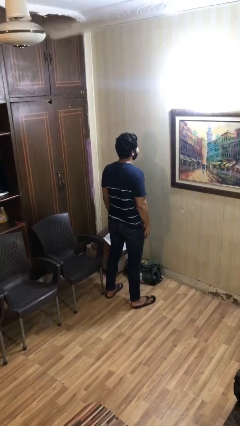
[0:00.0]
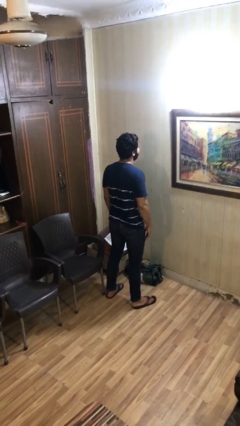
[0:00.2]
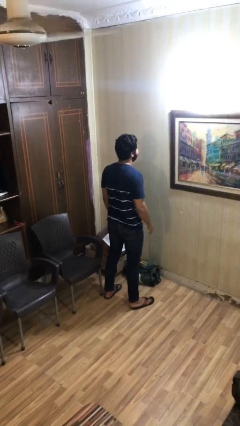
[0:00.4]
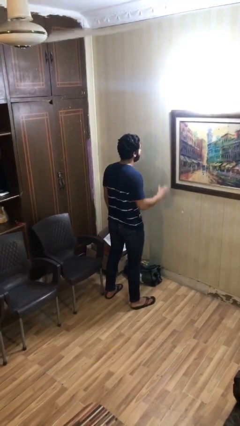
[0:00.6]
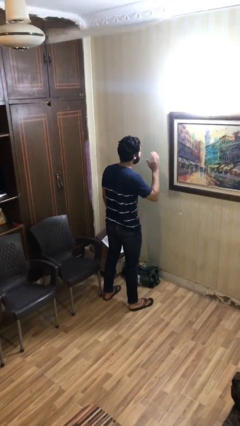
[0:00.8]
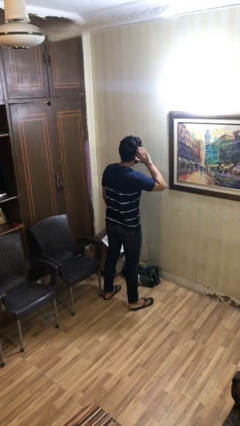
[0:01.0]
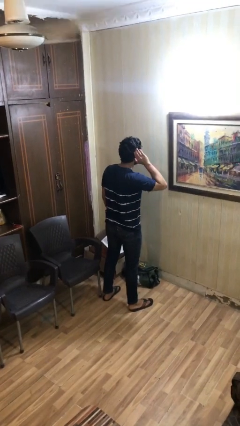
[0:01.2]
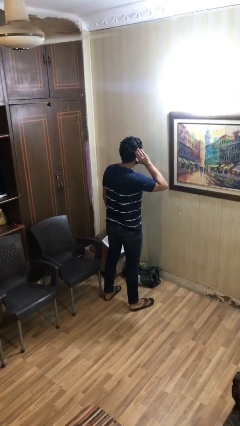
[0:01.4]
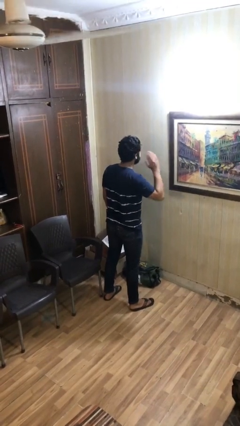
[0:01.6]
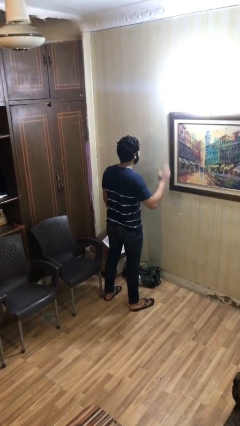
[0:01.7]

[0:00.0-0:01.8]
person gestures listen closely

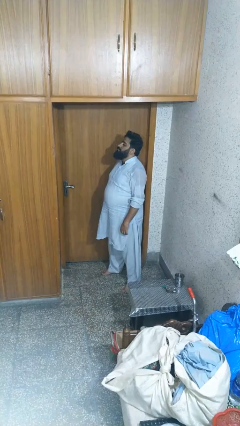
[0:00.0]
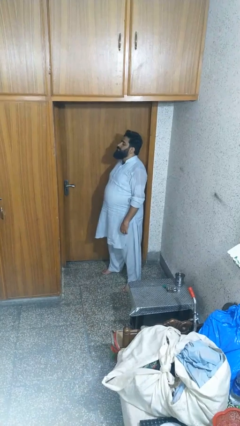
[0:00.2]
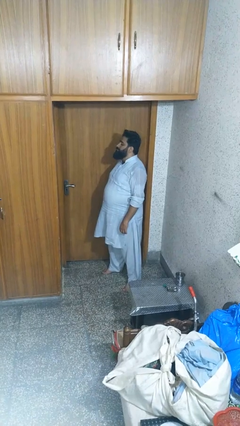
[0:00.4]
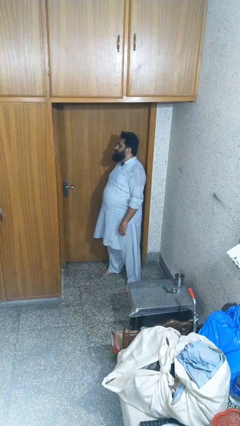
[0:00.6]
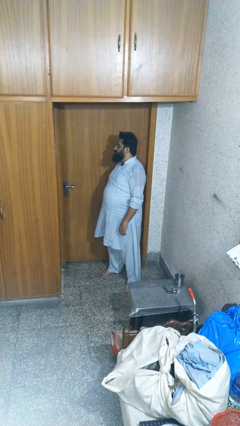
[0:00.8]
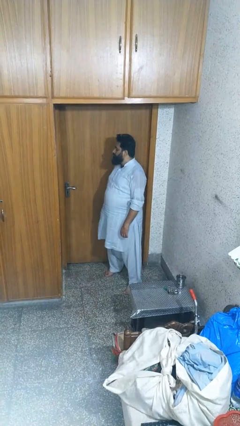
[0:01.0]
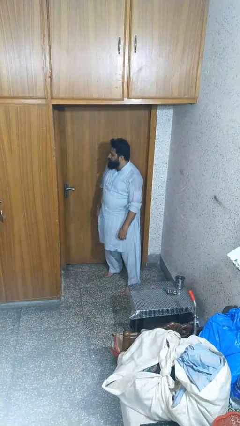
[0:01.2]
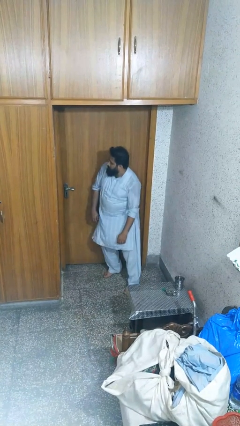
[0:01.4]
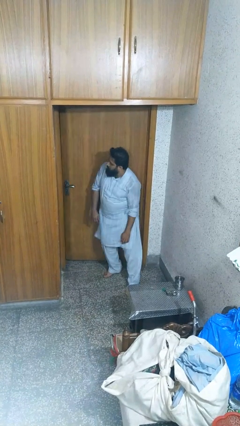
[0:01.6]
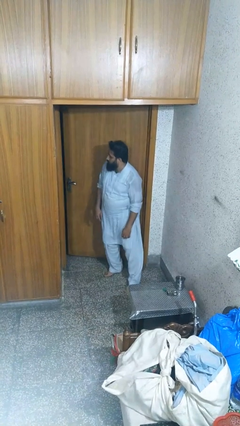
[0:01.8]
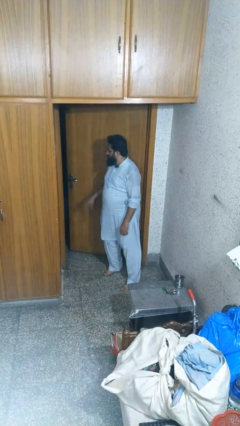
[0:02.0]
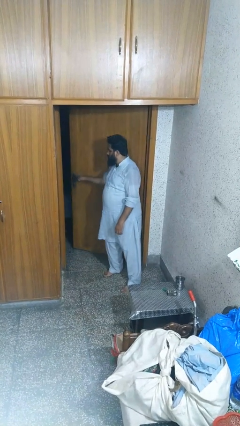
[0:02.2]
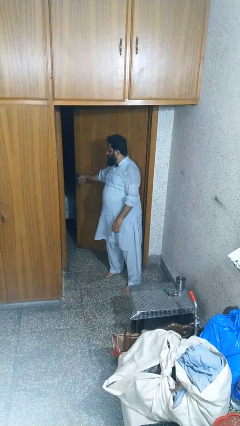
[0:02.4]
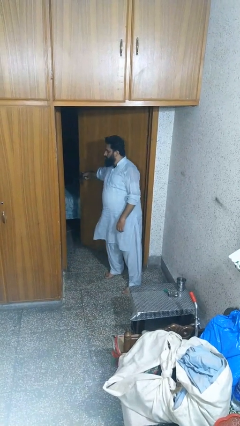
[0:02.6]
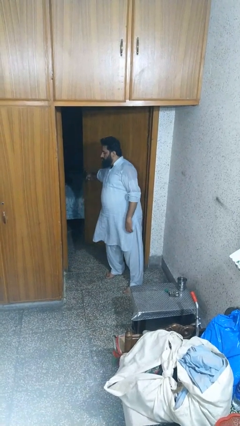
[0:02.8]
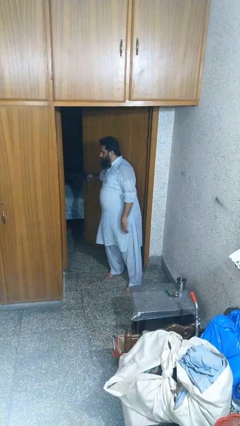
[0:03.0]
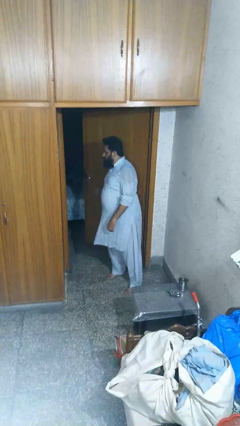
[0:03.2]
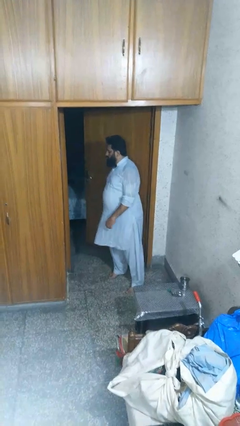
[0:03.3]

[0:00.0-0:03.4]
person opens facility door

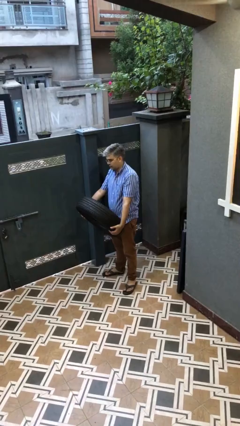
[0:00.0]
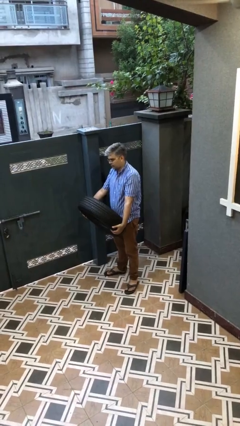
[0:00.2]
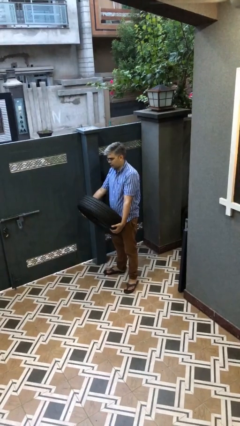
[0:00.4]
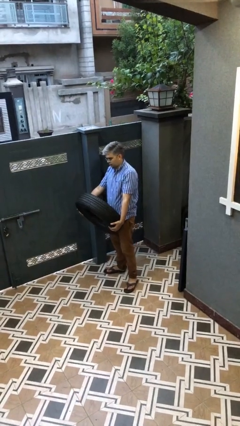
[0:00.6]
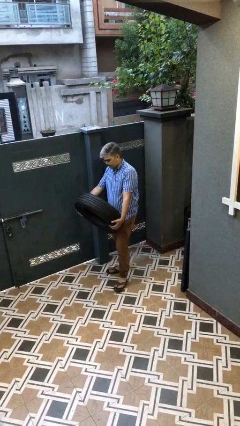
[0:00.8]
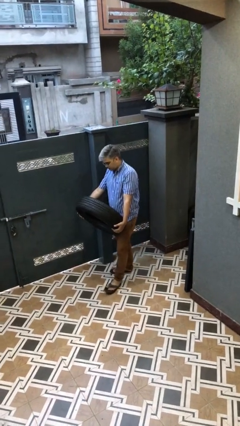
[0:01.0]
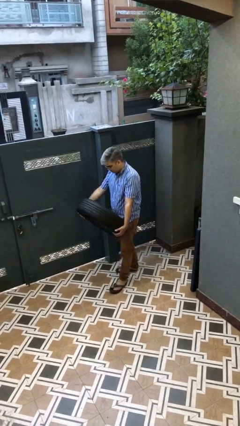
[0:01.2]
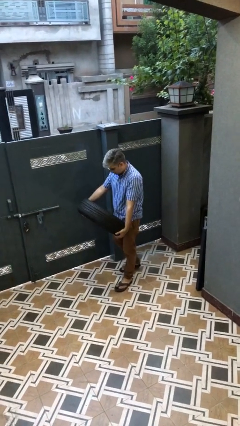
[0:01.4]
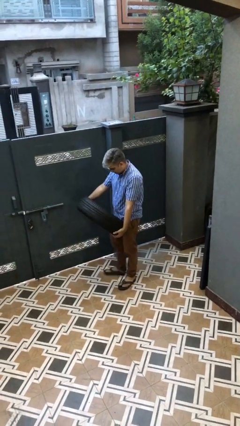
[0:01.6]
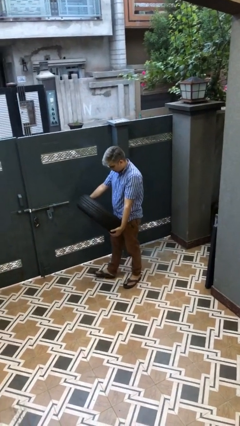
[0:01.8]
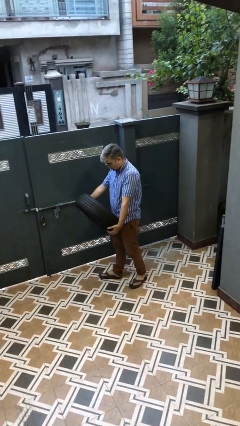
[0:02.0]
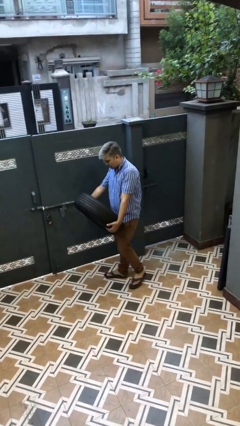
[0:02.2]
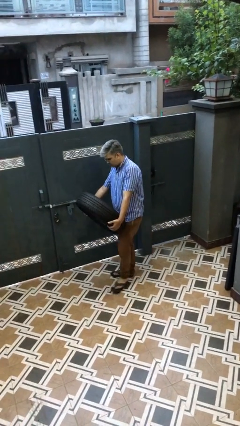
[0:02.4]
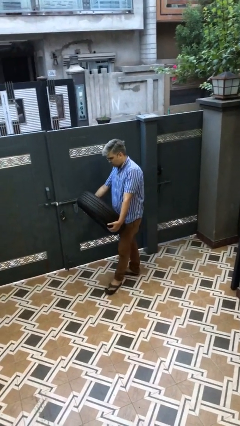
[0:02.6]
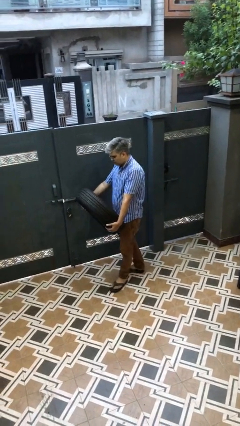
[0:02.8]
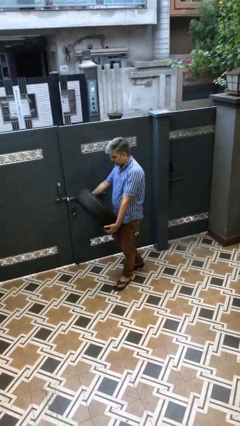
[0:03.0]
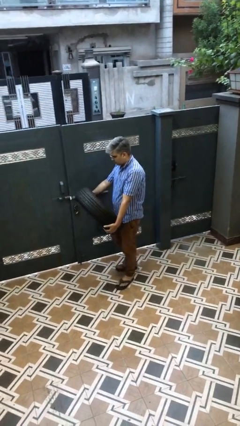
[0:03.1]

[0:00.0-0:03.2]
person carries heavy object

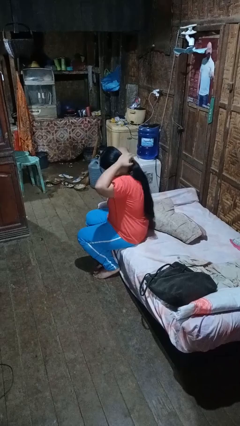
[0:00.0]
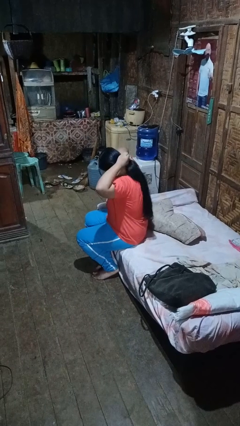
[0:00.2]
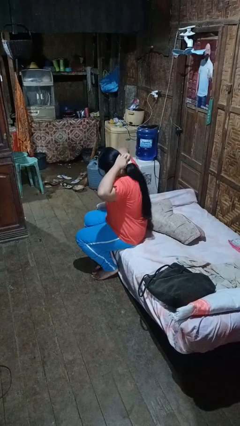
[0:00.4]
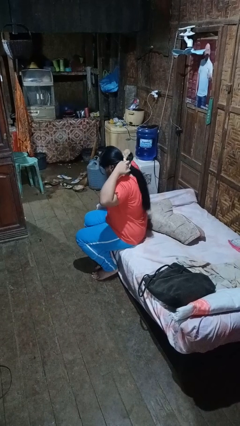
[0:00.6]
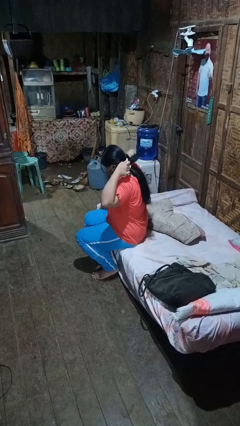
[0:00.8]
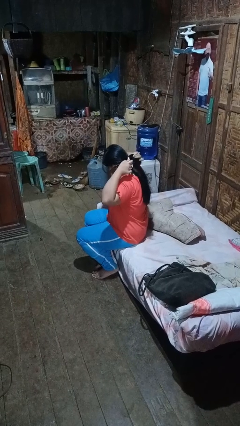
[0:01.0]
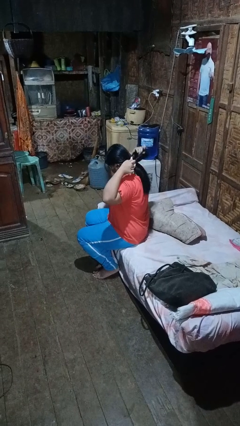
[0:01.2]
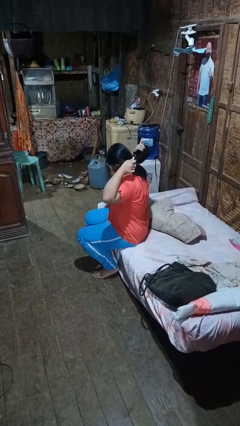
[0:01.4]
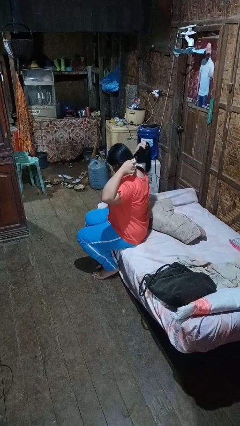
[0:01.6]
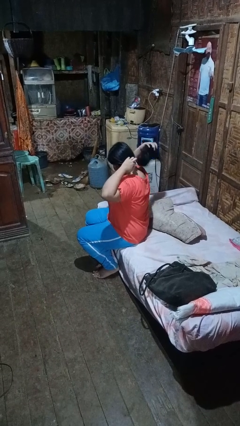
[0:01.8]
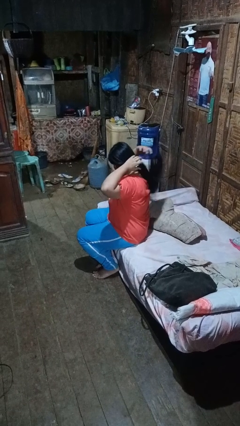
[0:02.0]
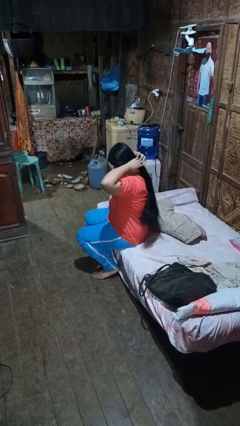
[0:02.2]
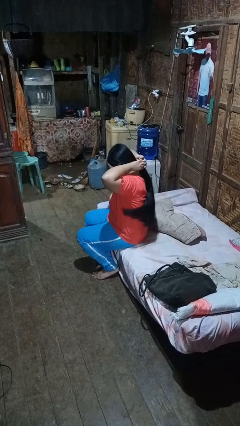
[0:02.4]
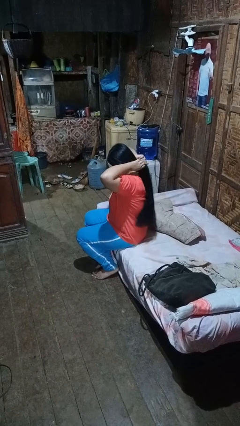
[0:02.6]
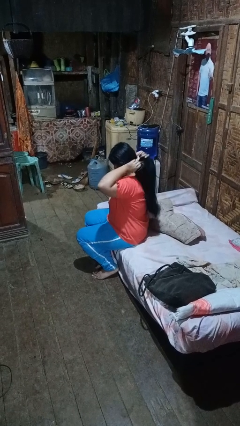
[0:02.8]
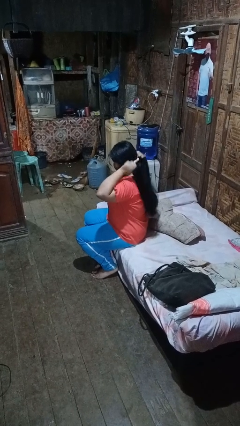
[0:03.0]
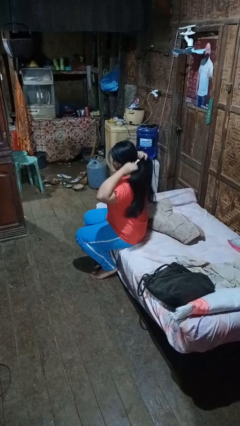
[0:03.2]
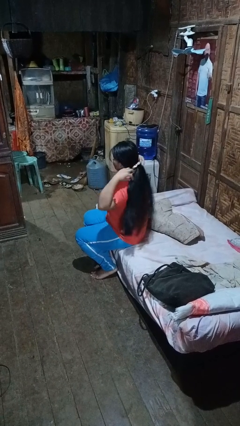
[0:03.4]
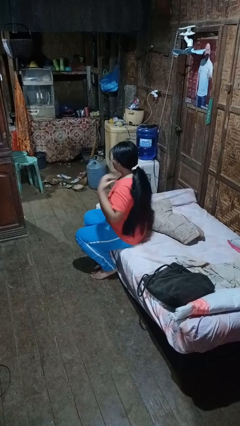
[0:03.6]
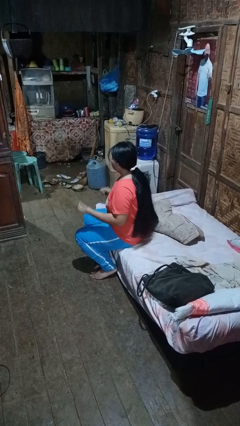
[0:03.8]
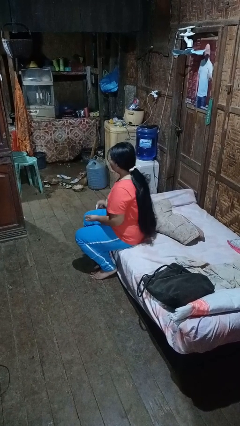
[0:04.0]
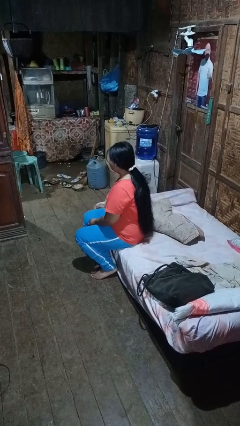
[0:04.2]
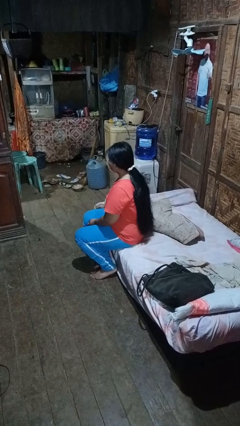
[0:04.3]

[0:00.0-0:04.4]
person puts hair in ponytail

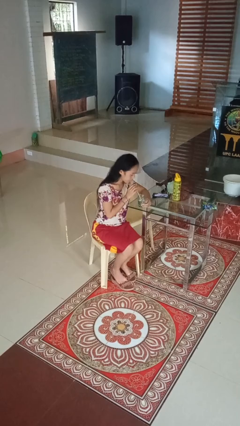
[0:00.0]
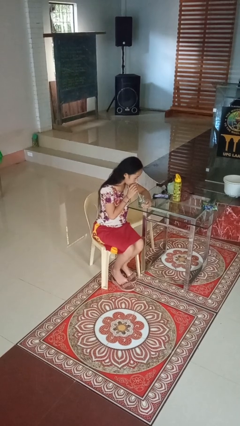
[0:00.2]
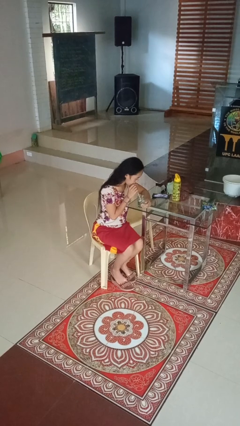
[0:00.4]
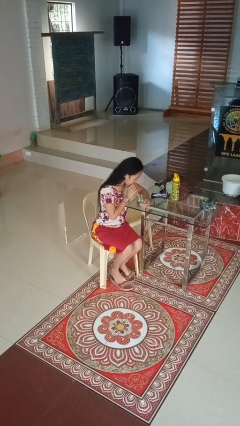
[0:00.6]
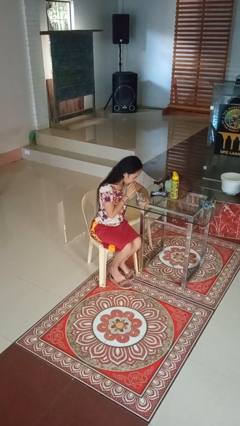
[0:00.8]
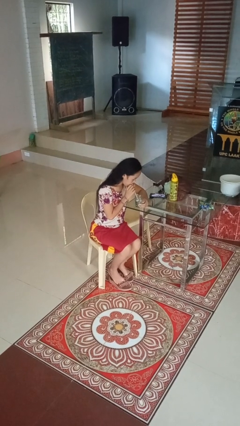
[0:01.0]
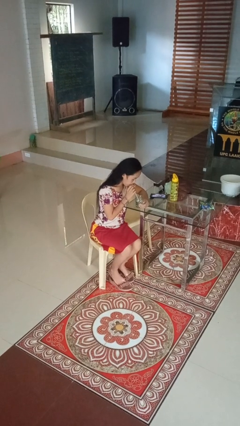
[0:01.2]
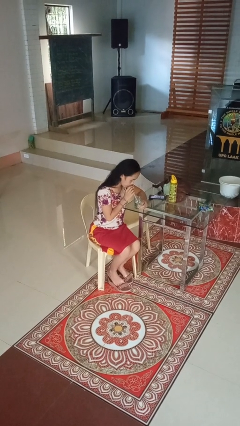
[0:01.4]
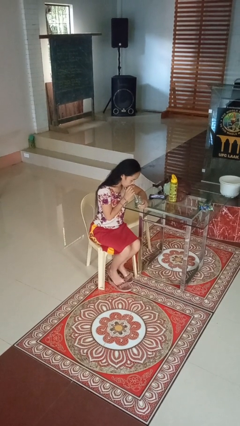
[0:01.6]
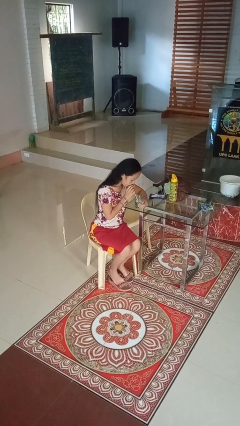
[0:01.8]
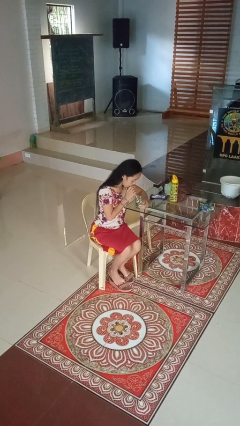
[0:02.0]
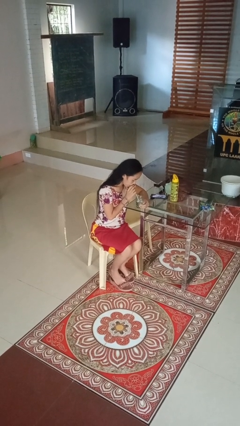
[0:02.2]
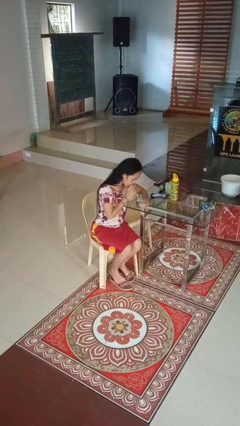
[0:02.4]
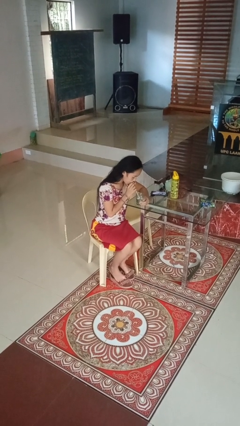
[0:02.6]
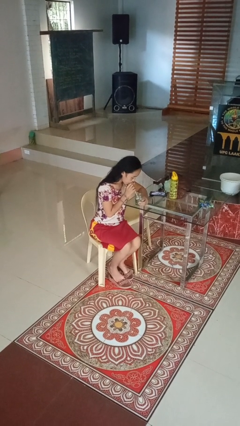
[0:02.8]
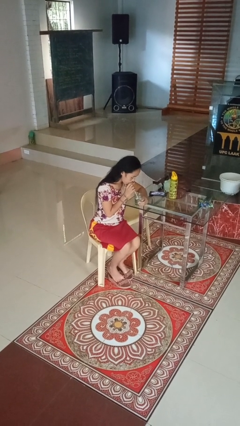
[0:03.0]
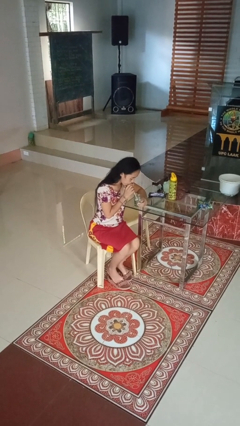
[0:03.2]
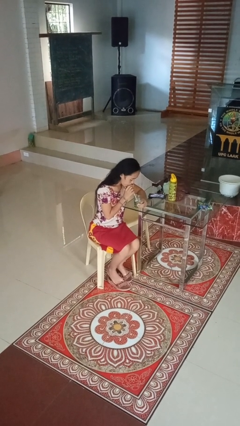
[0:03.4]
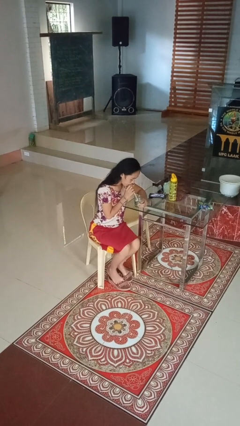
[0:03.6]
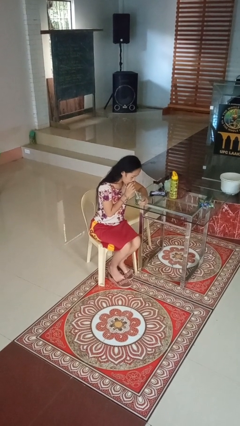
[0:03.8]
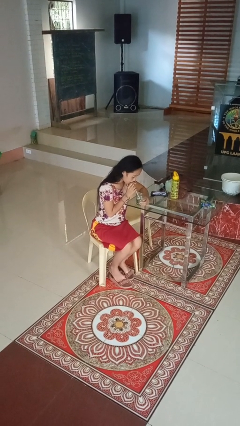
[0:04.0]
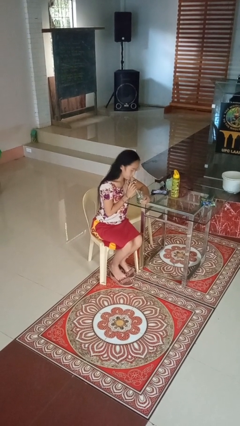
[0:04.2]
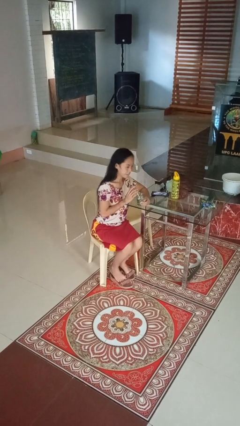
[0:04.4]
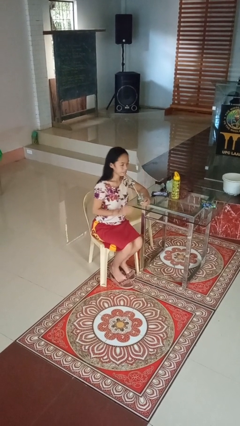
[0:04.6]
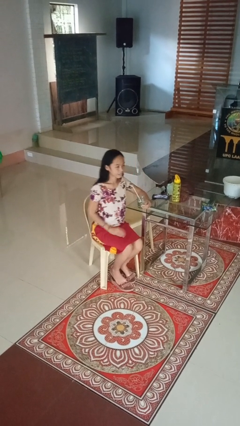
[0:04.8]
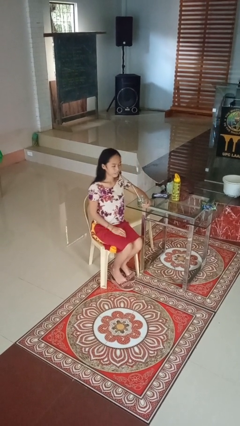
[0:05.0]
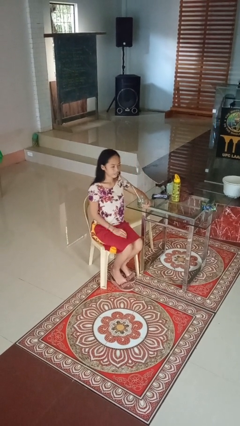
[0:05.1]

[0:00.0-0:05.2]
person drinks from straw
